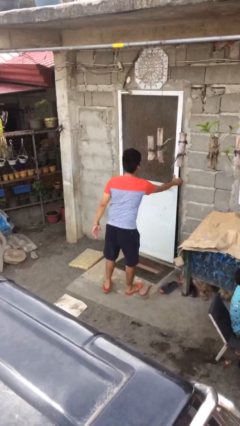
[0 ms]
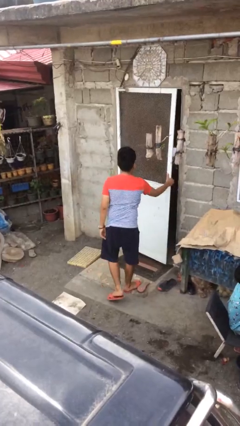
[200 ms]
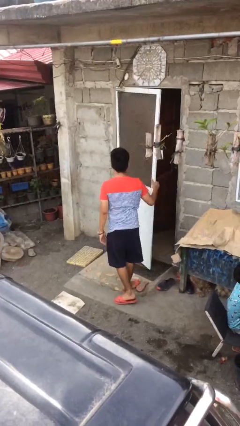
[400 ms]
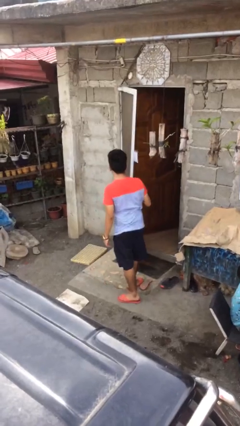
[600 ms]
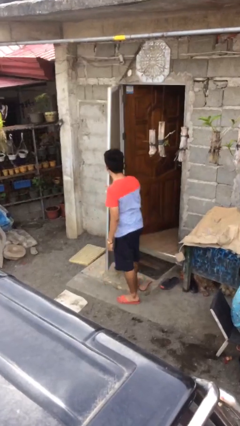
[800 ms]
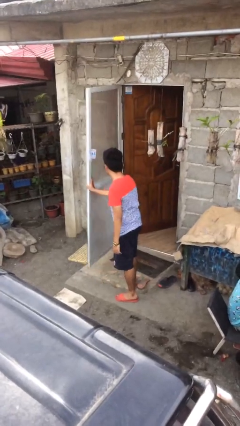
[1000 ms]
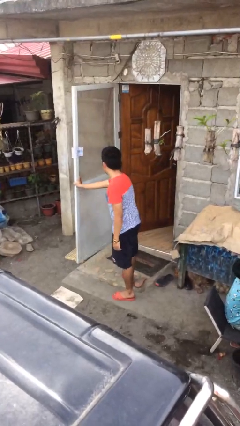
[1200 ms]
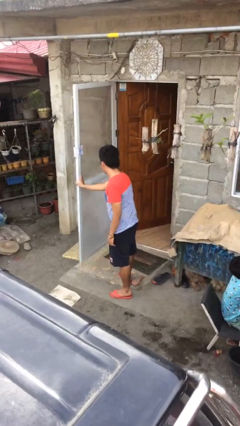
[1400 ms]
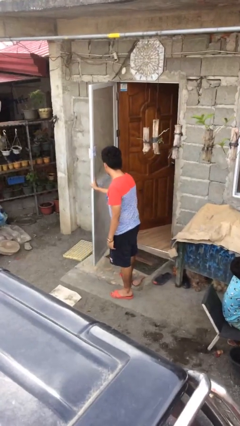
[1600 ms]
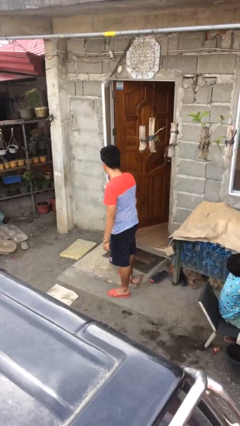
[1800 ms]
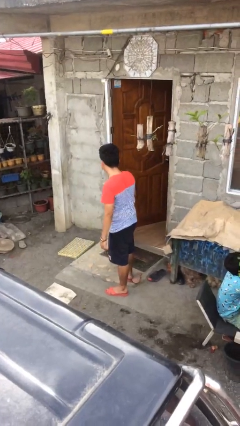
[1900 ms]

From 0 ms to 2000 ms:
person opens facility door

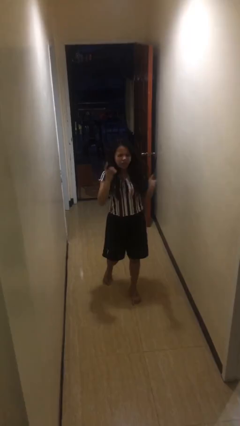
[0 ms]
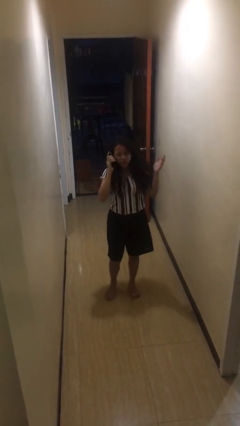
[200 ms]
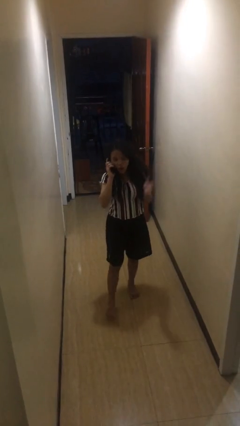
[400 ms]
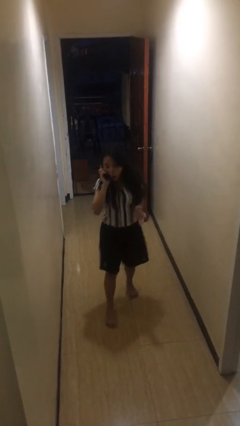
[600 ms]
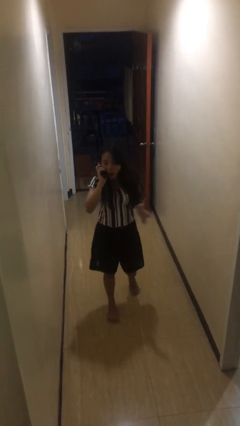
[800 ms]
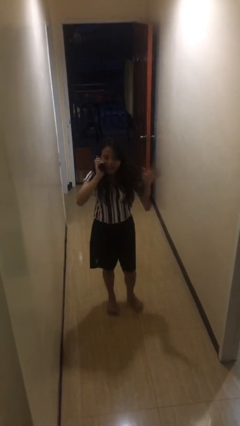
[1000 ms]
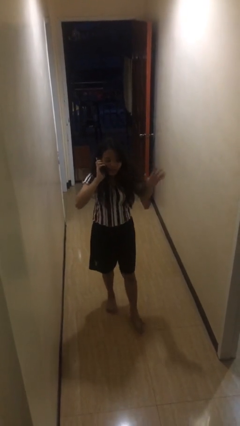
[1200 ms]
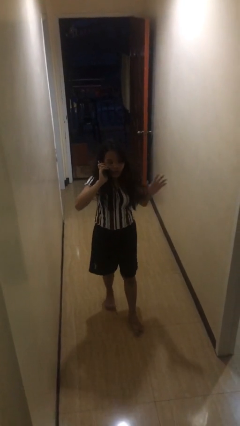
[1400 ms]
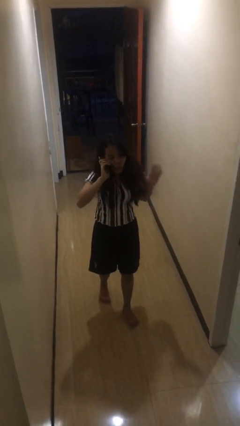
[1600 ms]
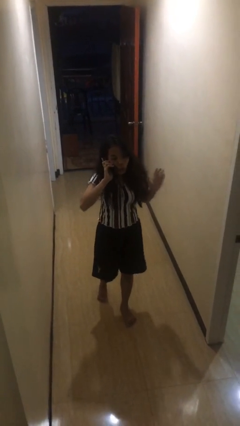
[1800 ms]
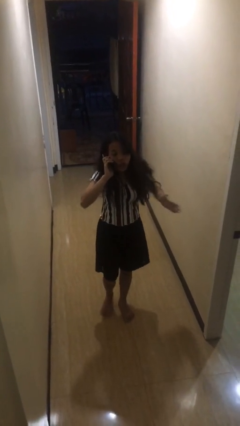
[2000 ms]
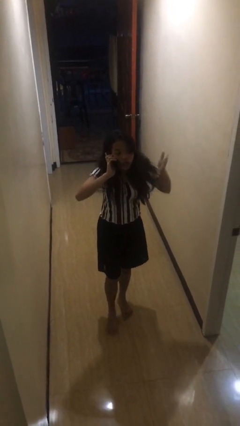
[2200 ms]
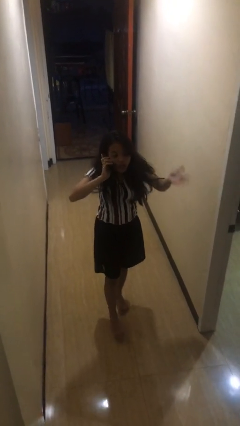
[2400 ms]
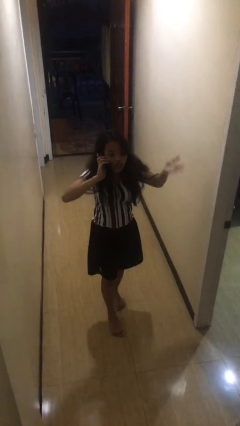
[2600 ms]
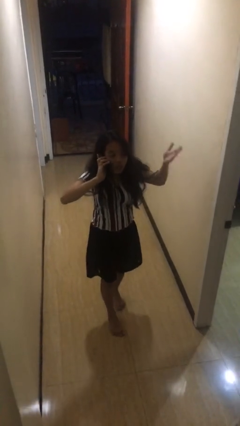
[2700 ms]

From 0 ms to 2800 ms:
person talks on phone

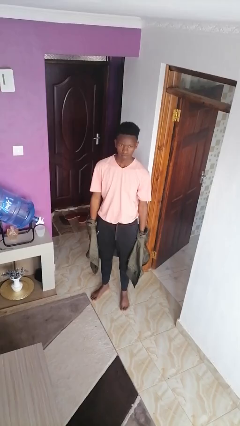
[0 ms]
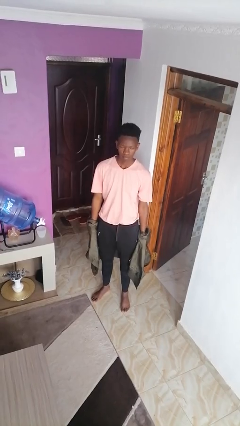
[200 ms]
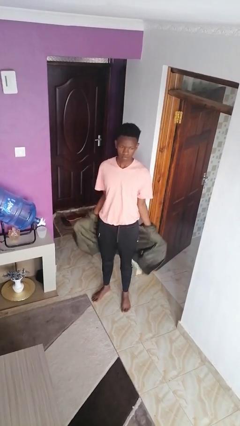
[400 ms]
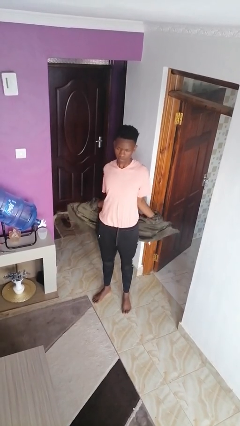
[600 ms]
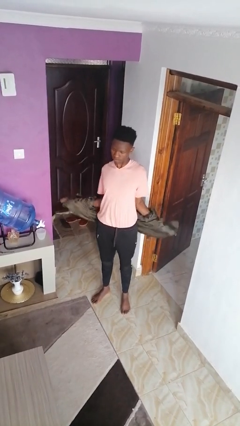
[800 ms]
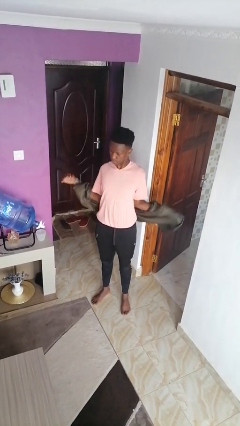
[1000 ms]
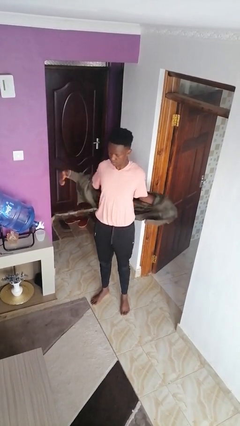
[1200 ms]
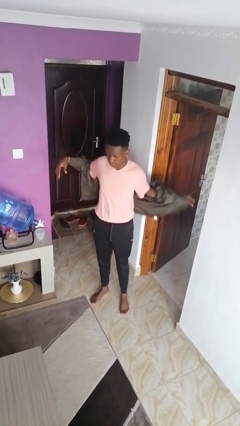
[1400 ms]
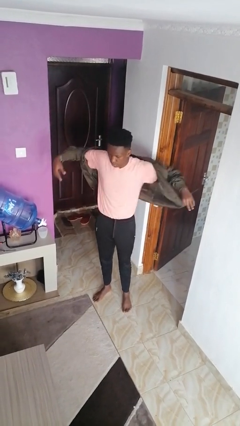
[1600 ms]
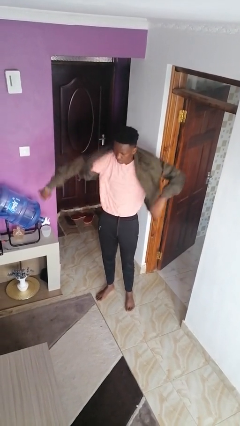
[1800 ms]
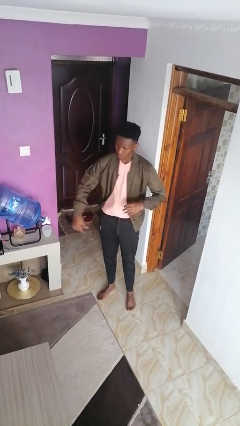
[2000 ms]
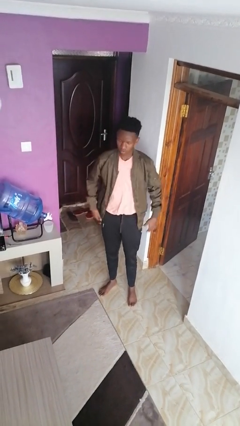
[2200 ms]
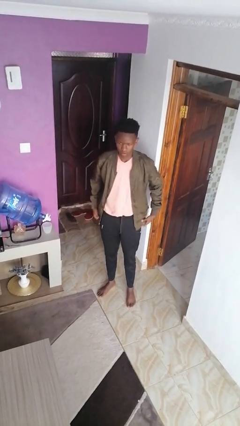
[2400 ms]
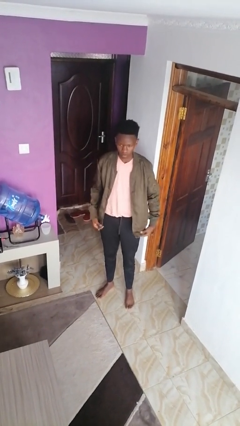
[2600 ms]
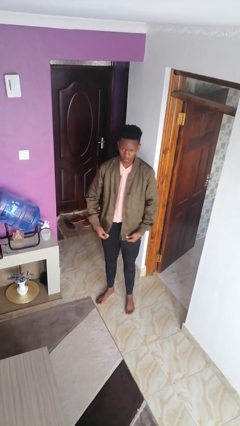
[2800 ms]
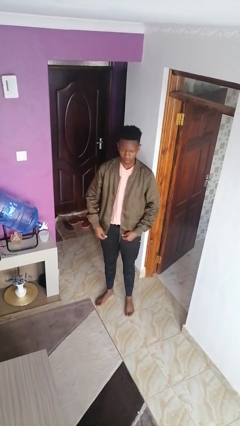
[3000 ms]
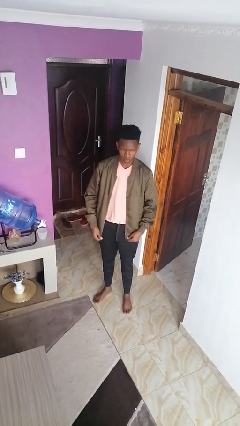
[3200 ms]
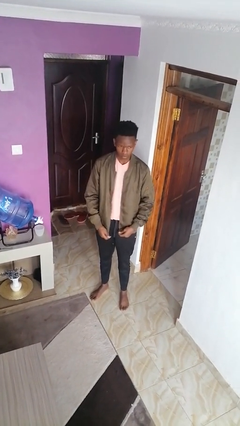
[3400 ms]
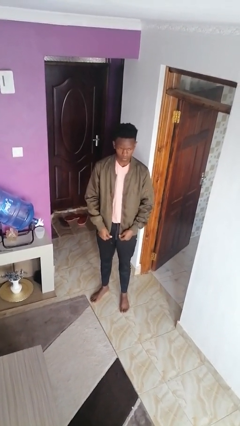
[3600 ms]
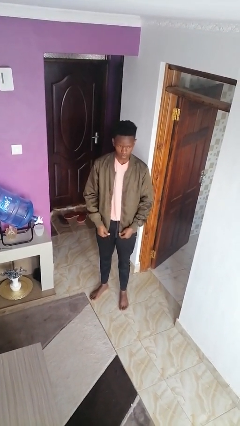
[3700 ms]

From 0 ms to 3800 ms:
person puts on jacket

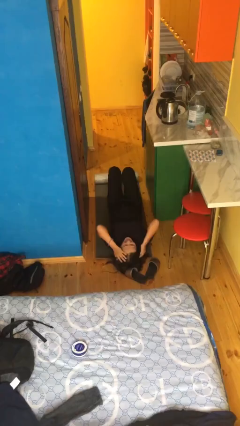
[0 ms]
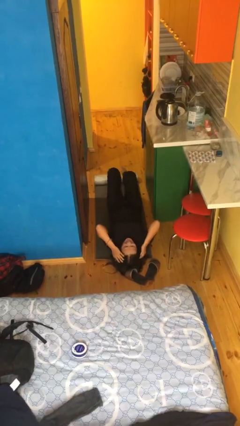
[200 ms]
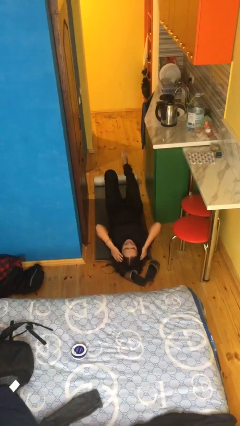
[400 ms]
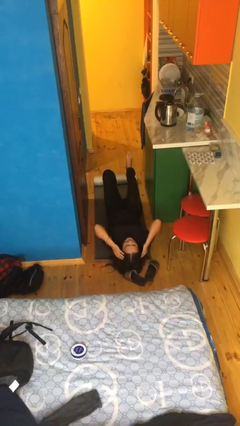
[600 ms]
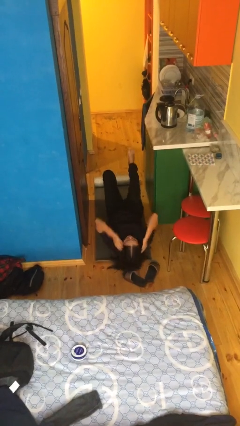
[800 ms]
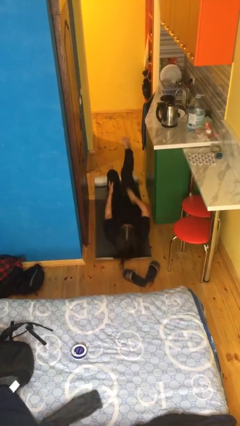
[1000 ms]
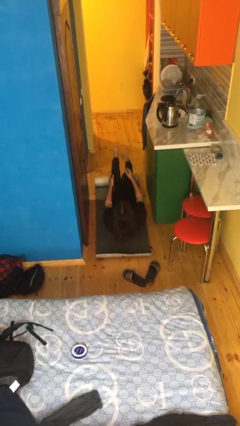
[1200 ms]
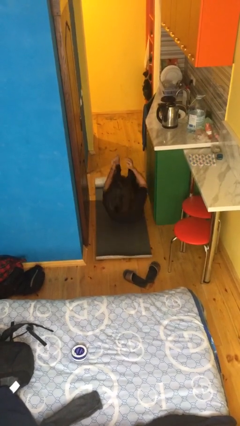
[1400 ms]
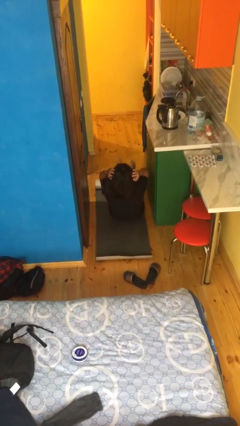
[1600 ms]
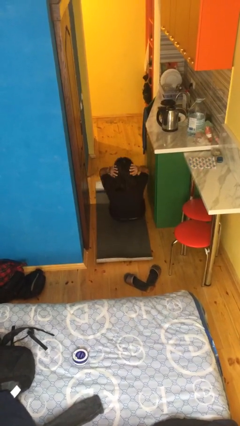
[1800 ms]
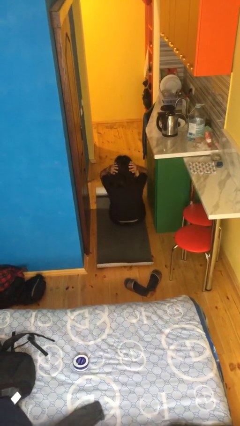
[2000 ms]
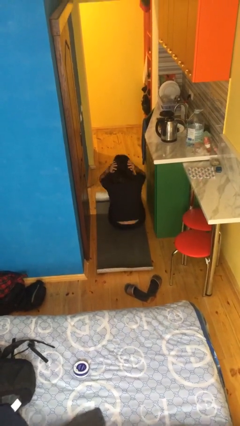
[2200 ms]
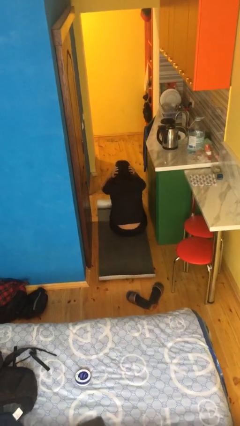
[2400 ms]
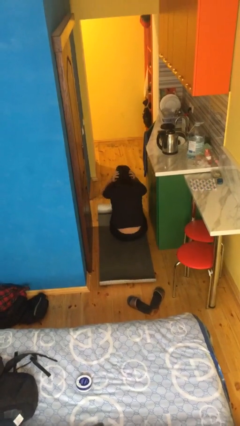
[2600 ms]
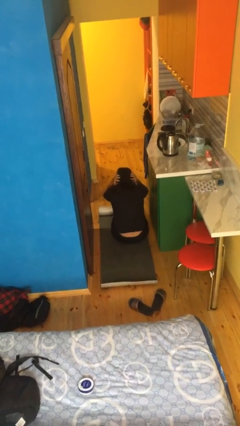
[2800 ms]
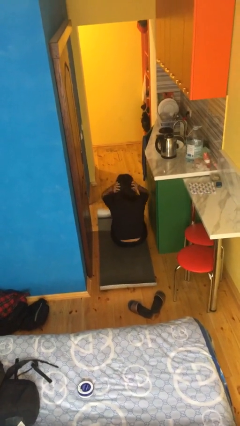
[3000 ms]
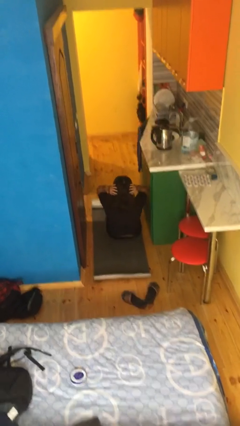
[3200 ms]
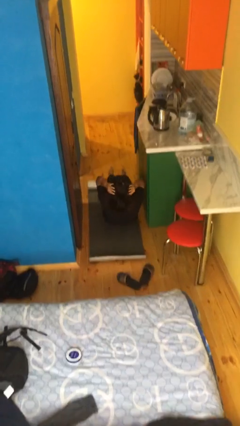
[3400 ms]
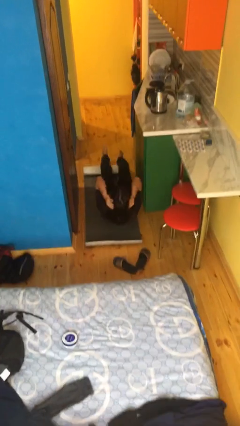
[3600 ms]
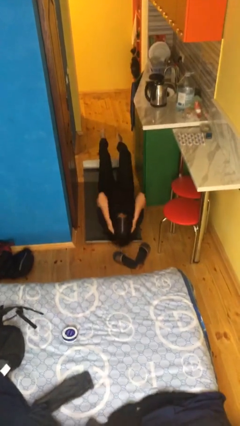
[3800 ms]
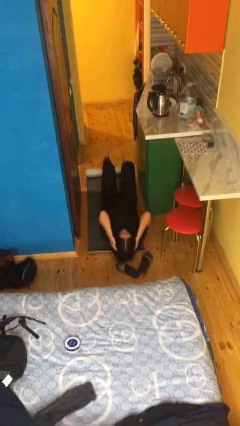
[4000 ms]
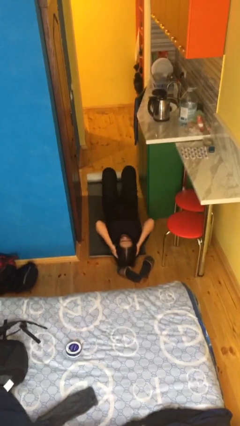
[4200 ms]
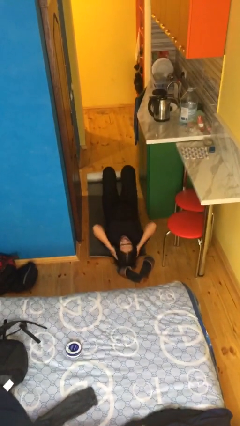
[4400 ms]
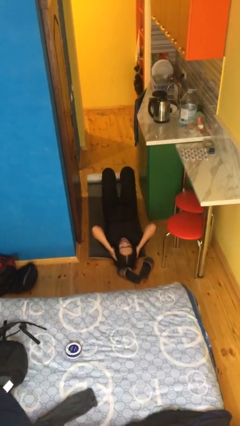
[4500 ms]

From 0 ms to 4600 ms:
person exercises with situp

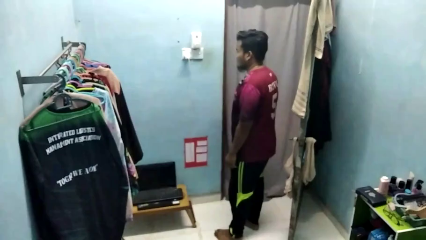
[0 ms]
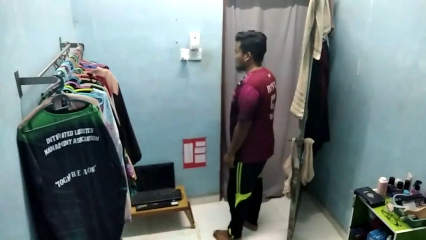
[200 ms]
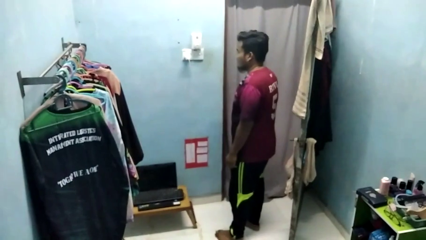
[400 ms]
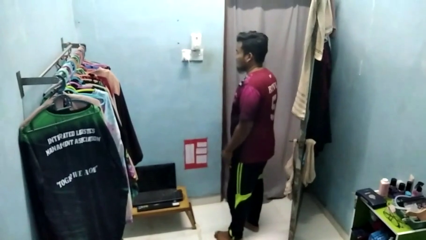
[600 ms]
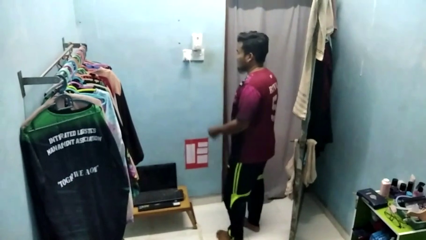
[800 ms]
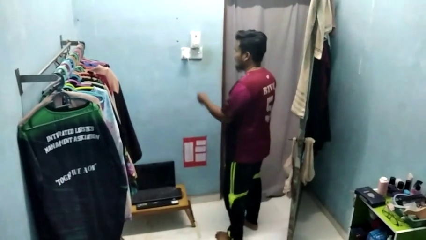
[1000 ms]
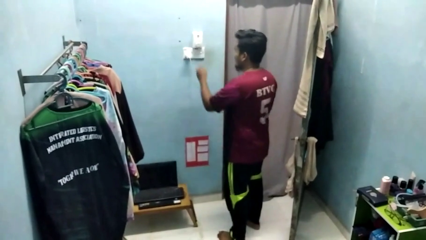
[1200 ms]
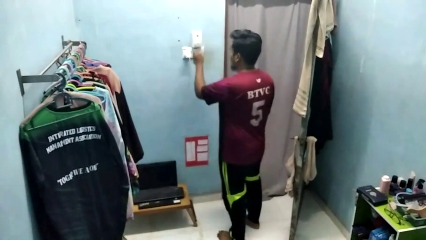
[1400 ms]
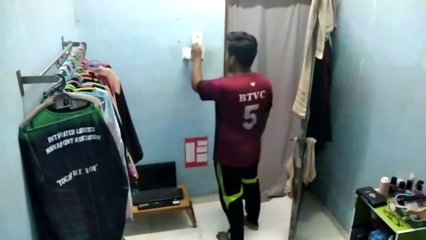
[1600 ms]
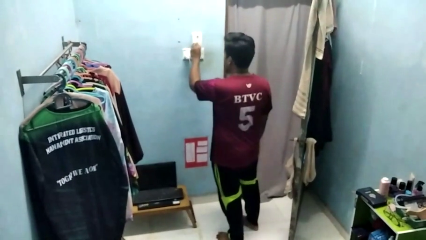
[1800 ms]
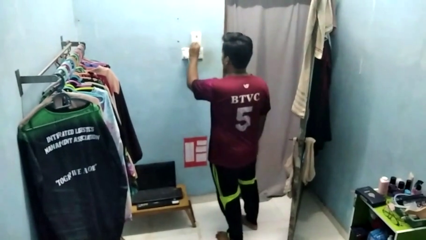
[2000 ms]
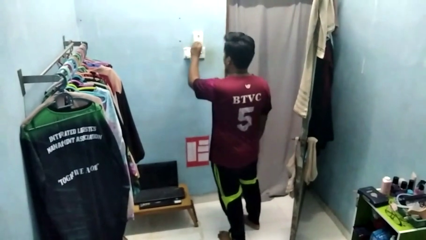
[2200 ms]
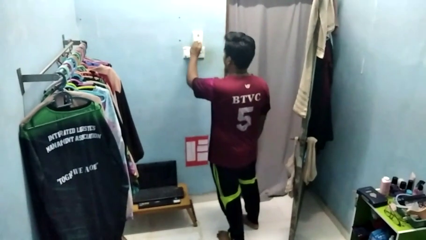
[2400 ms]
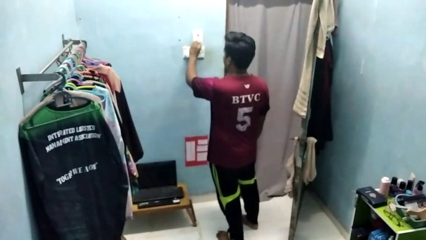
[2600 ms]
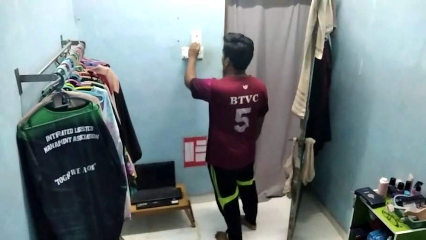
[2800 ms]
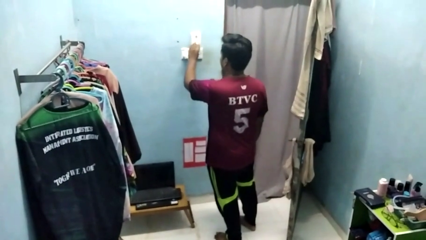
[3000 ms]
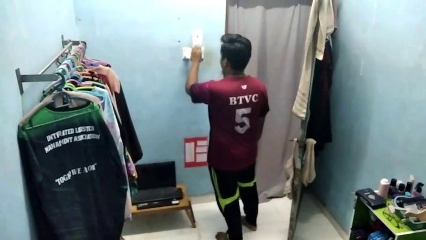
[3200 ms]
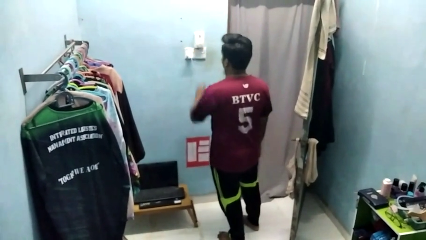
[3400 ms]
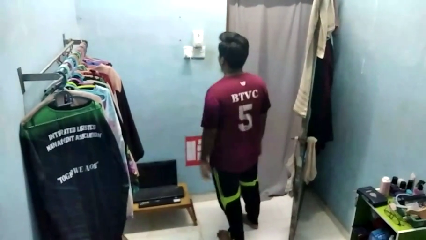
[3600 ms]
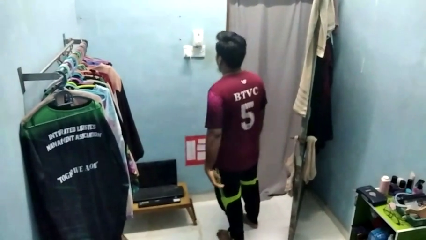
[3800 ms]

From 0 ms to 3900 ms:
person adjusts thermostat

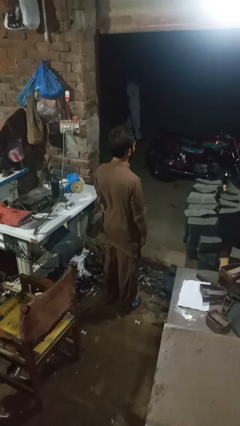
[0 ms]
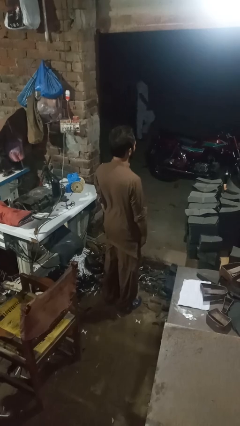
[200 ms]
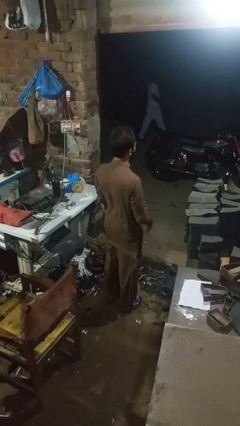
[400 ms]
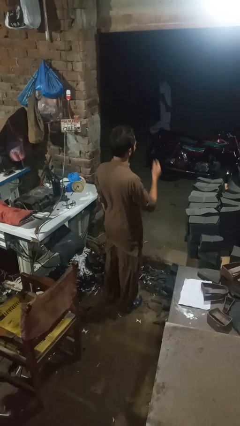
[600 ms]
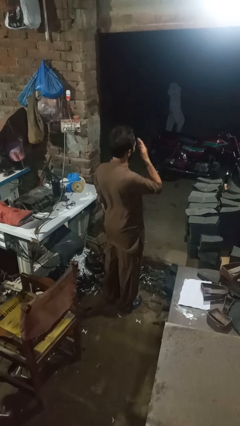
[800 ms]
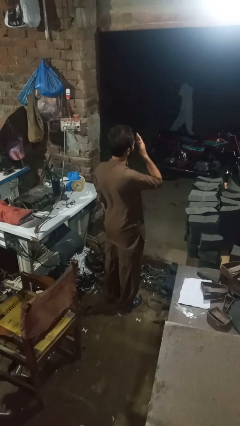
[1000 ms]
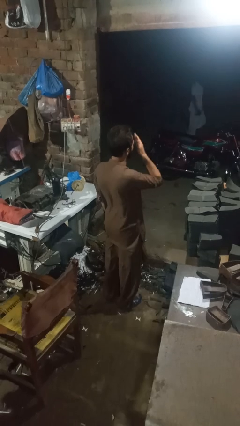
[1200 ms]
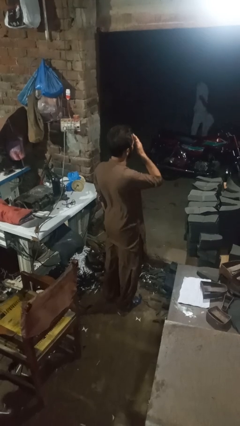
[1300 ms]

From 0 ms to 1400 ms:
person rubs eyes
